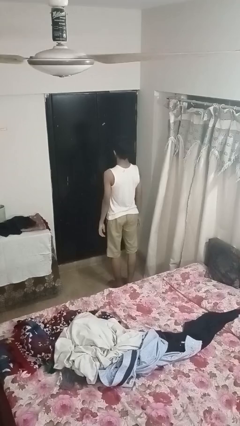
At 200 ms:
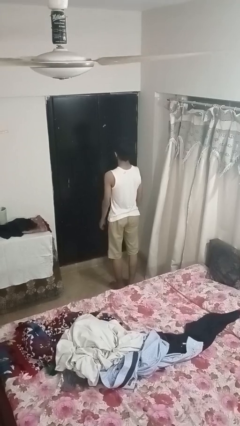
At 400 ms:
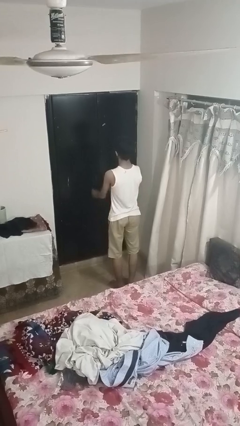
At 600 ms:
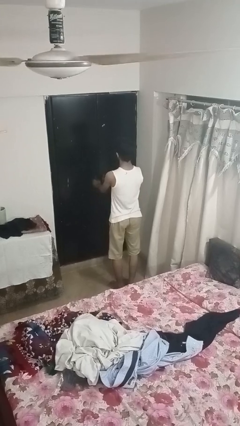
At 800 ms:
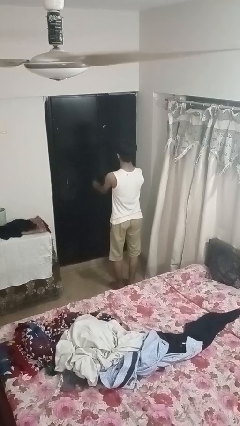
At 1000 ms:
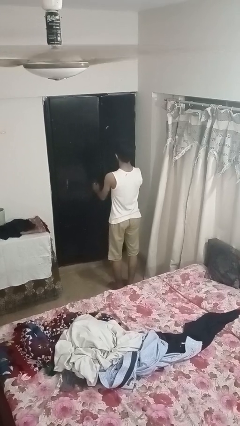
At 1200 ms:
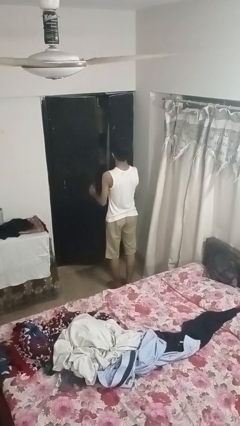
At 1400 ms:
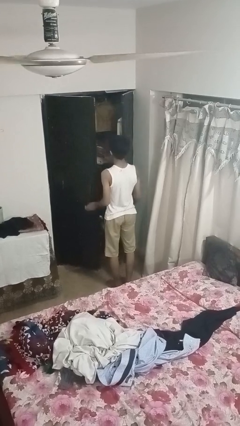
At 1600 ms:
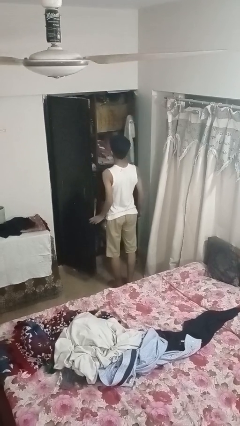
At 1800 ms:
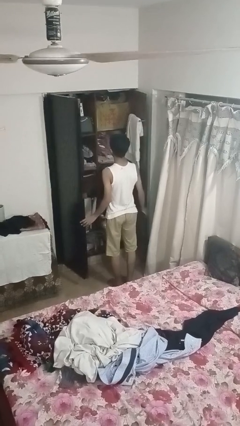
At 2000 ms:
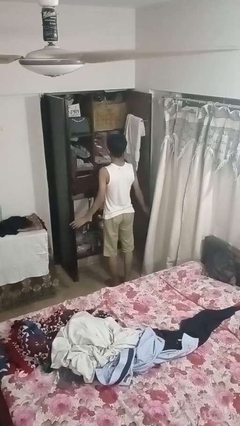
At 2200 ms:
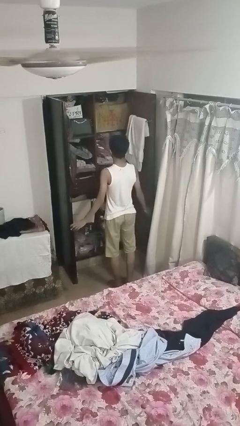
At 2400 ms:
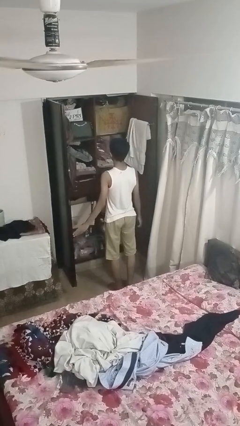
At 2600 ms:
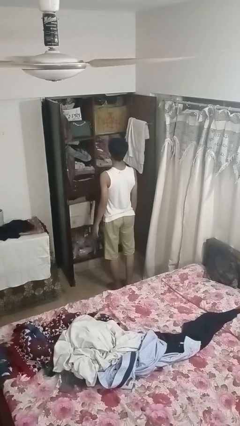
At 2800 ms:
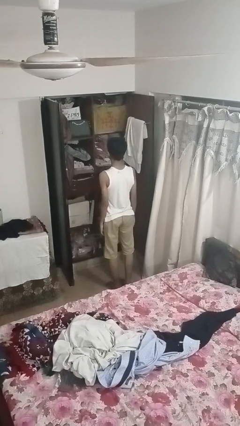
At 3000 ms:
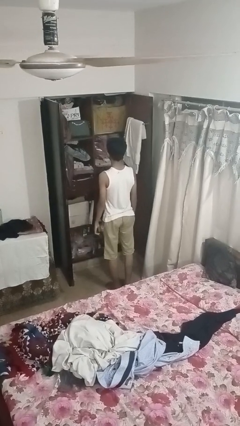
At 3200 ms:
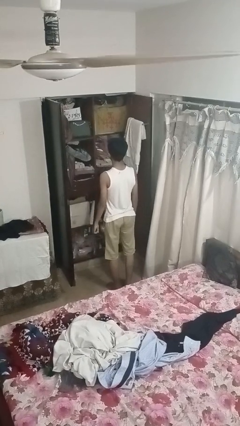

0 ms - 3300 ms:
person opens closet door

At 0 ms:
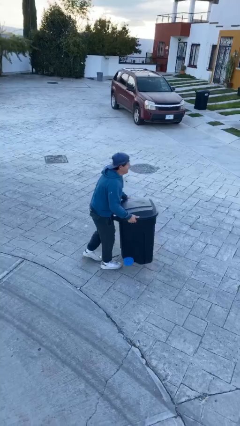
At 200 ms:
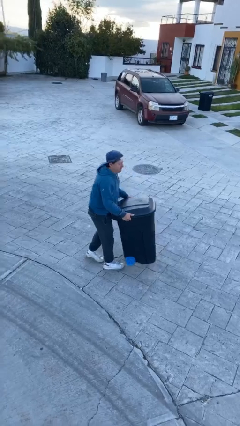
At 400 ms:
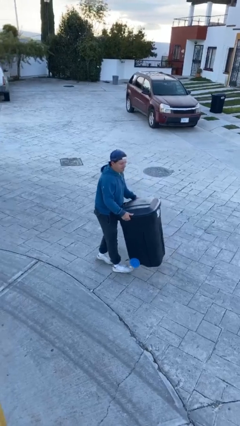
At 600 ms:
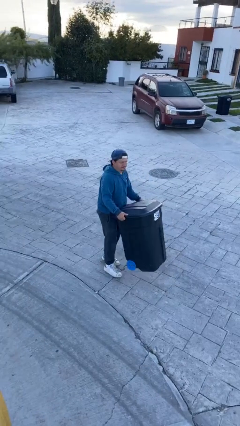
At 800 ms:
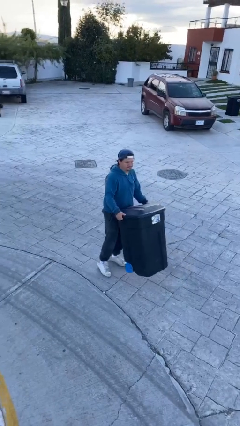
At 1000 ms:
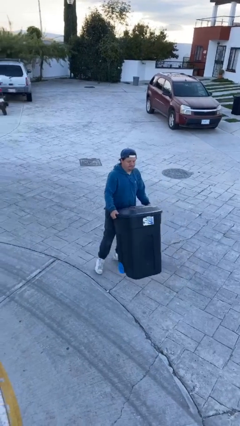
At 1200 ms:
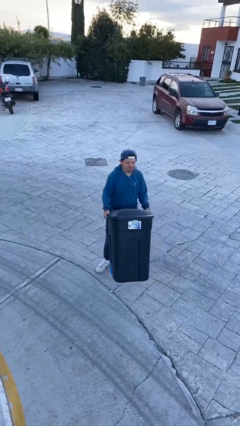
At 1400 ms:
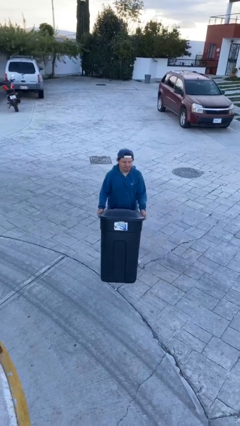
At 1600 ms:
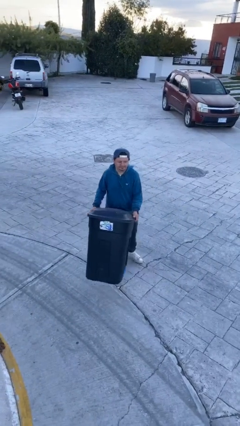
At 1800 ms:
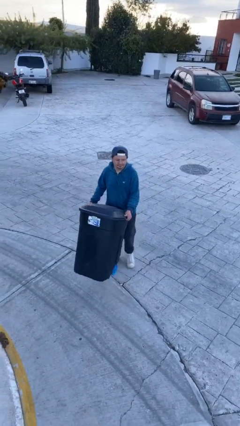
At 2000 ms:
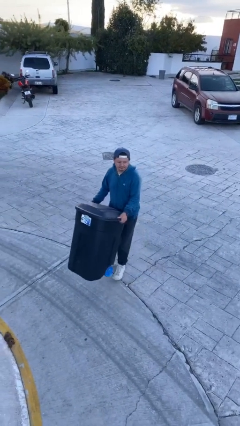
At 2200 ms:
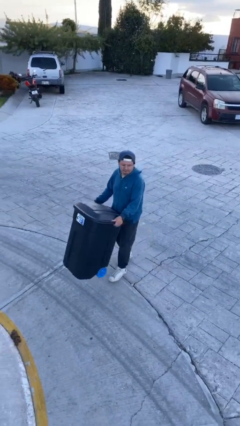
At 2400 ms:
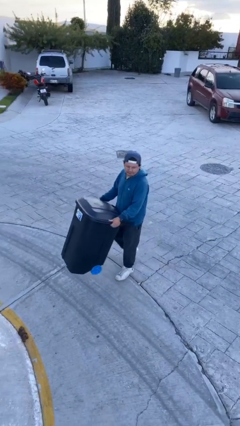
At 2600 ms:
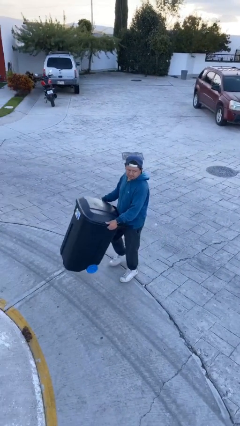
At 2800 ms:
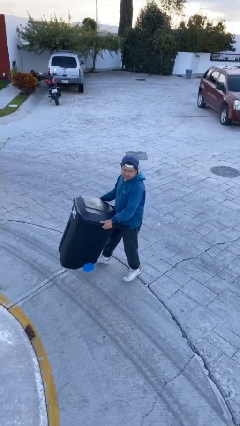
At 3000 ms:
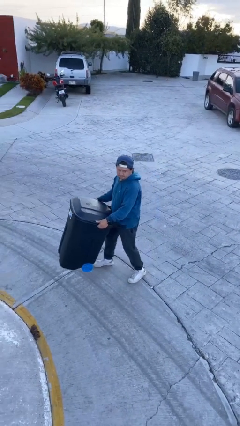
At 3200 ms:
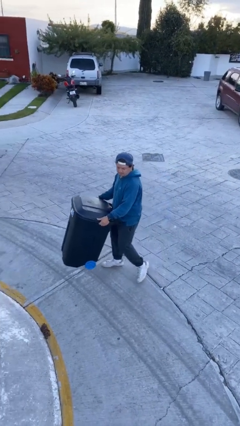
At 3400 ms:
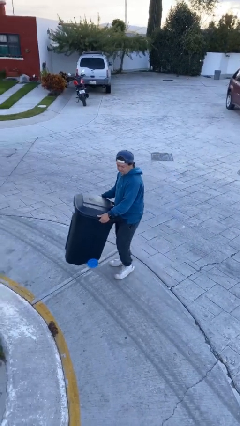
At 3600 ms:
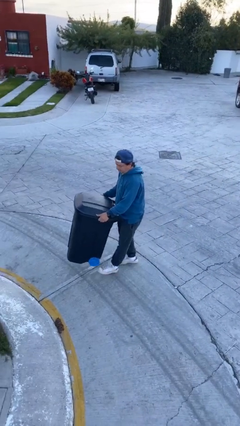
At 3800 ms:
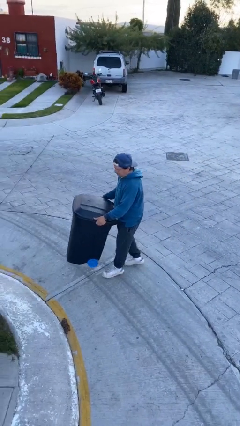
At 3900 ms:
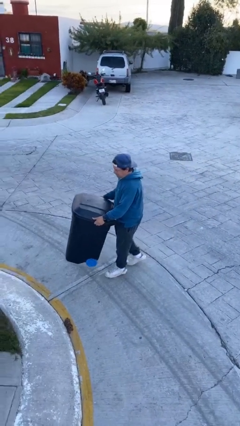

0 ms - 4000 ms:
person carries heavy object

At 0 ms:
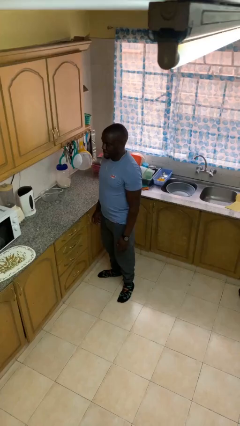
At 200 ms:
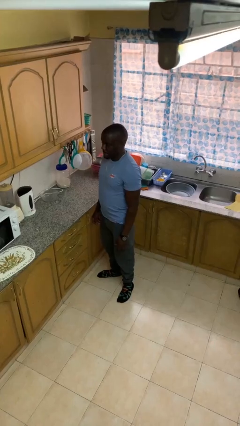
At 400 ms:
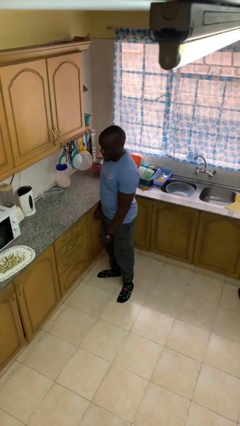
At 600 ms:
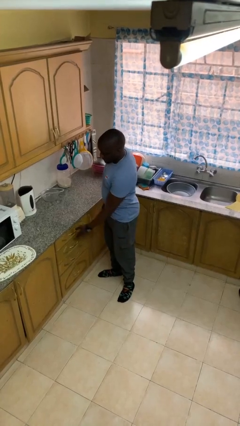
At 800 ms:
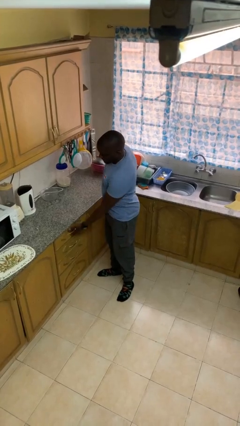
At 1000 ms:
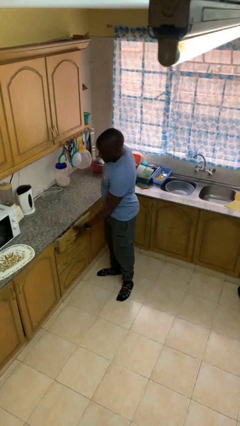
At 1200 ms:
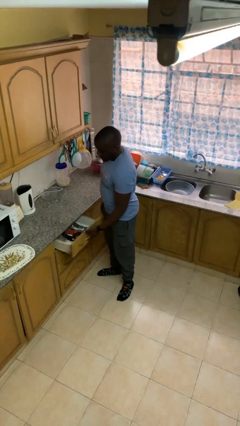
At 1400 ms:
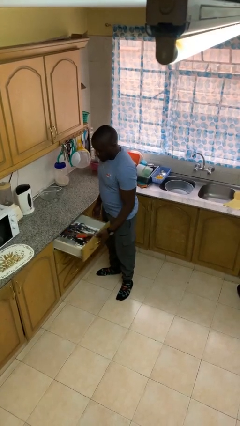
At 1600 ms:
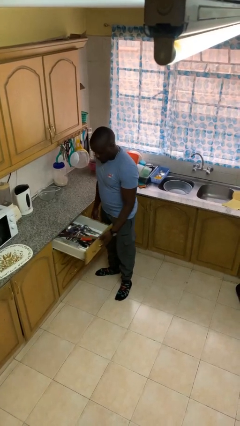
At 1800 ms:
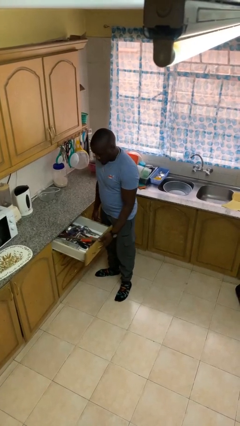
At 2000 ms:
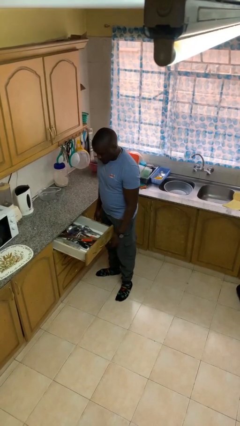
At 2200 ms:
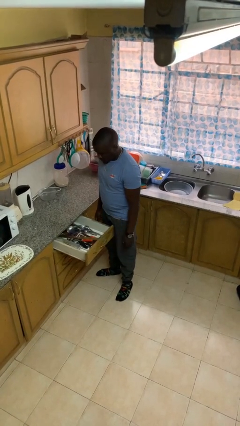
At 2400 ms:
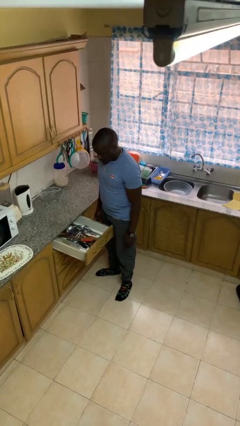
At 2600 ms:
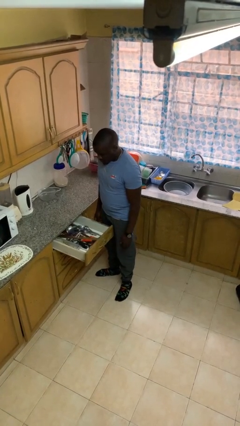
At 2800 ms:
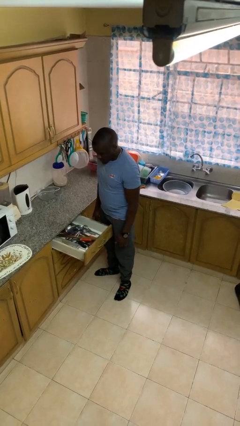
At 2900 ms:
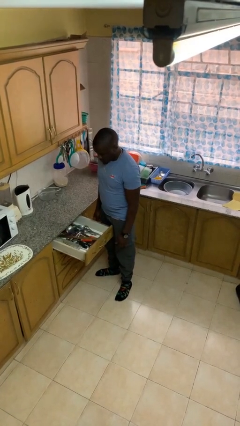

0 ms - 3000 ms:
person opens kitchen drawer

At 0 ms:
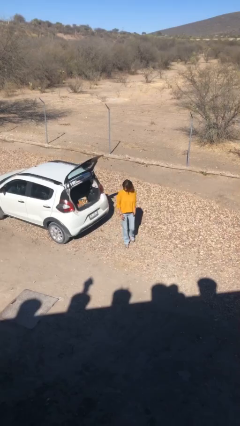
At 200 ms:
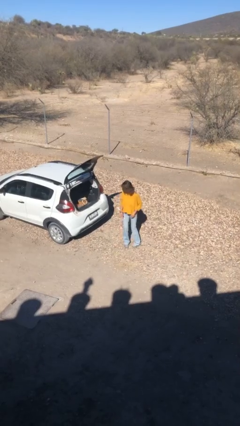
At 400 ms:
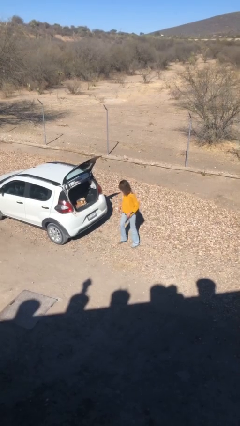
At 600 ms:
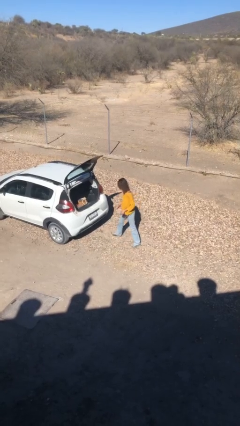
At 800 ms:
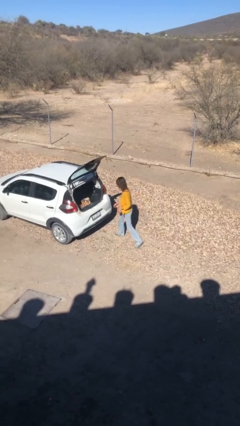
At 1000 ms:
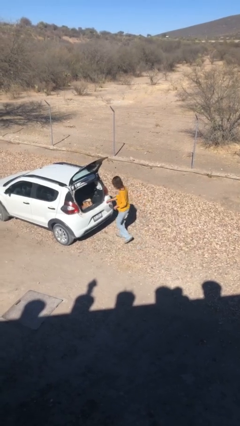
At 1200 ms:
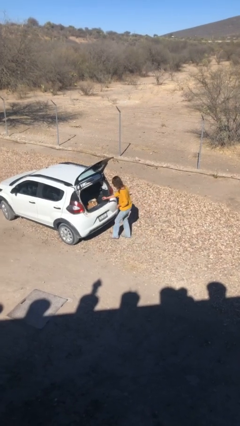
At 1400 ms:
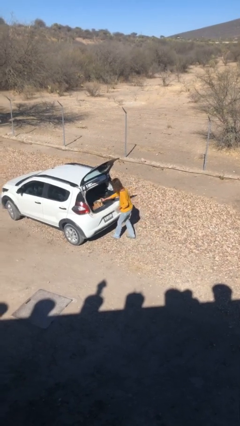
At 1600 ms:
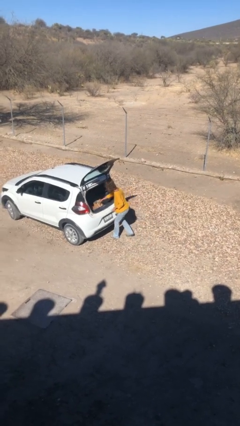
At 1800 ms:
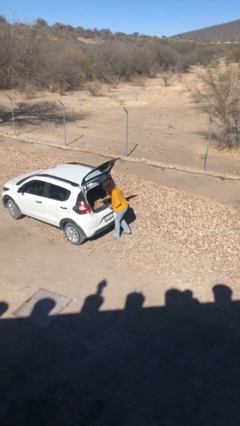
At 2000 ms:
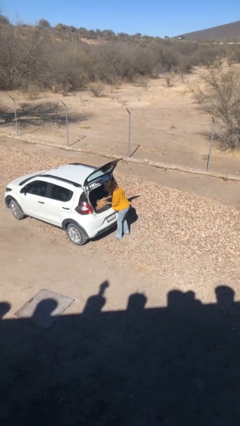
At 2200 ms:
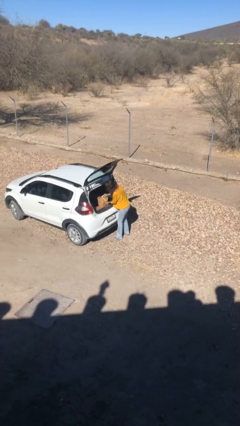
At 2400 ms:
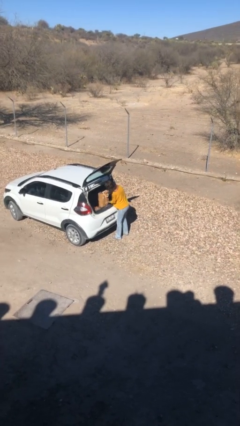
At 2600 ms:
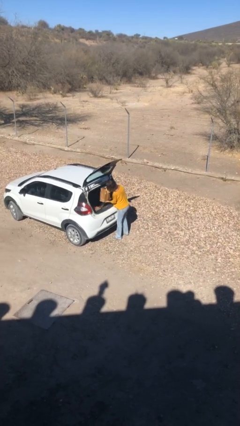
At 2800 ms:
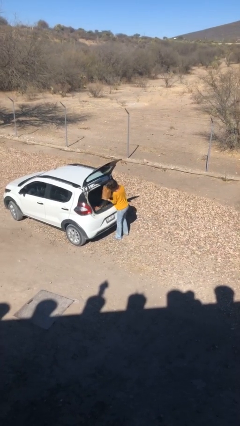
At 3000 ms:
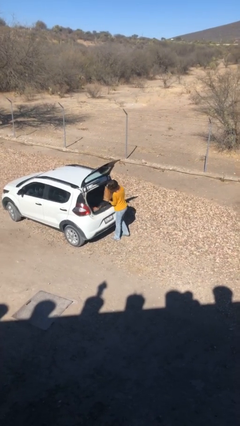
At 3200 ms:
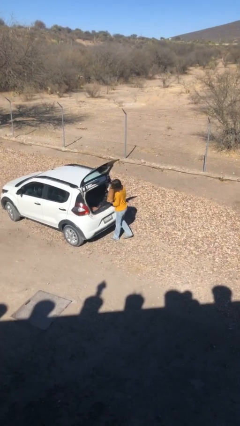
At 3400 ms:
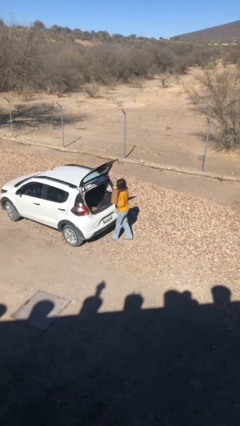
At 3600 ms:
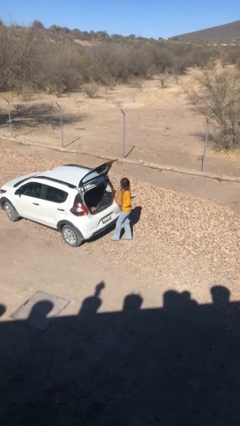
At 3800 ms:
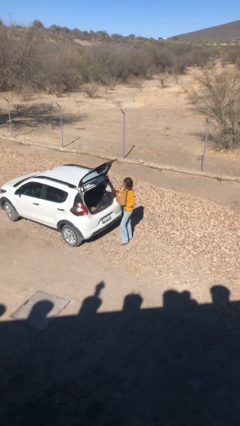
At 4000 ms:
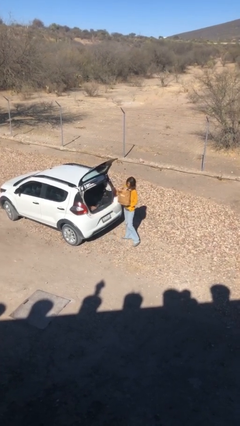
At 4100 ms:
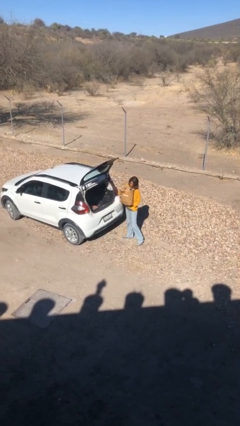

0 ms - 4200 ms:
person unloads car

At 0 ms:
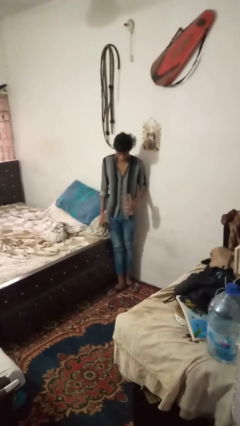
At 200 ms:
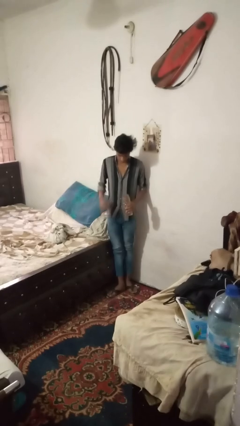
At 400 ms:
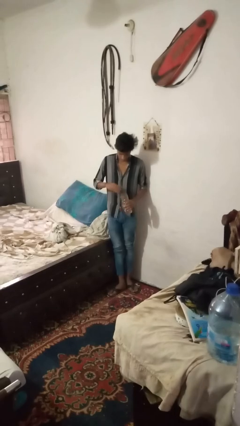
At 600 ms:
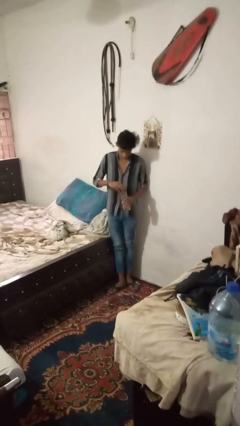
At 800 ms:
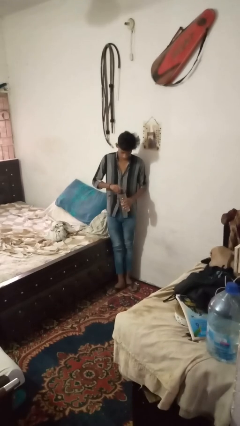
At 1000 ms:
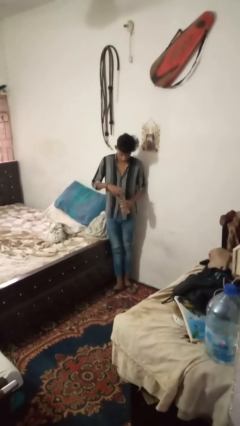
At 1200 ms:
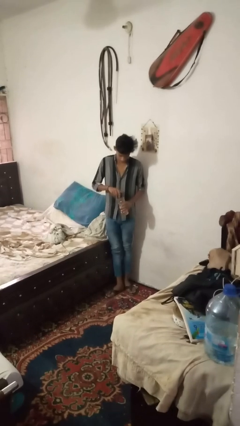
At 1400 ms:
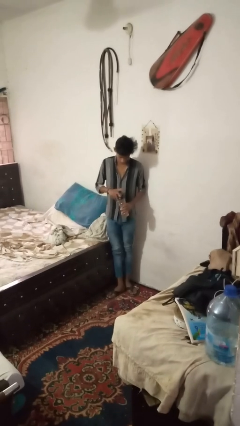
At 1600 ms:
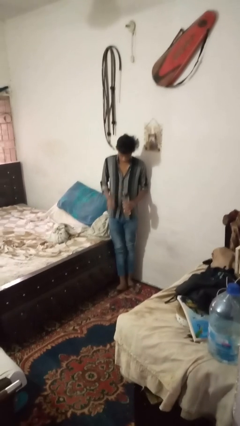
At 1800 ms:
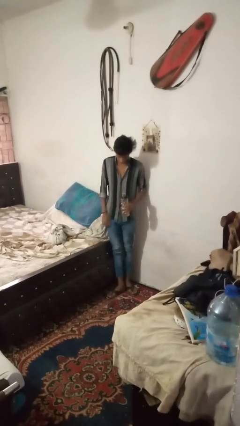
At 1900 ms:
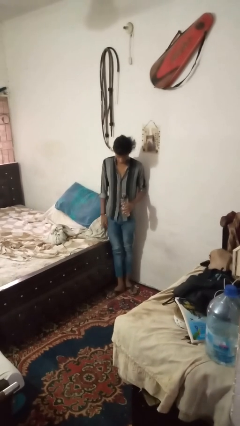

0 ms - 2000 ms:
person screws lid to bottle

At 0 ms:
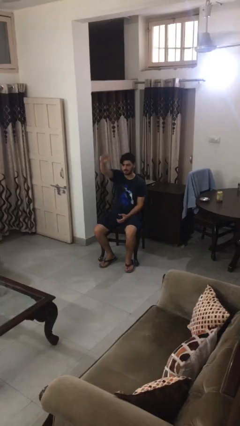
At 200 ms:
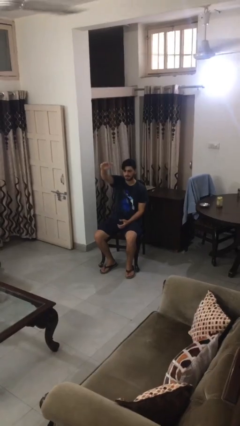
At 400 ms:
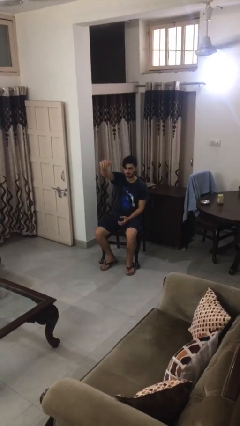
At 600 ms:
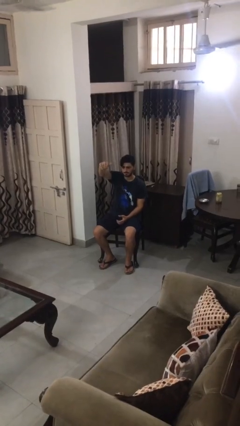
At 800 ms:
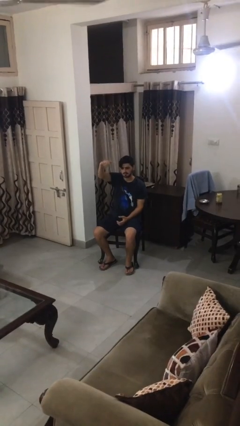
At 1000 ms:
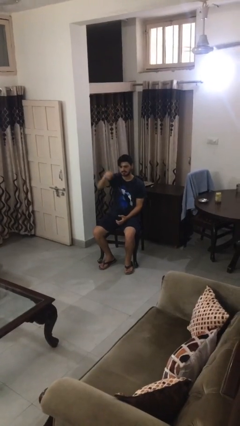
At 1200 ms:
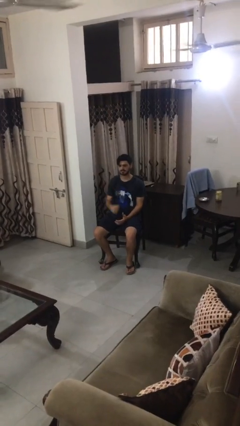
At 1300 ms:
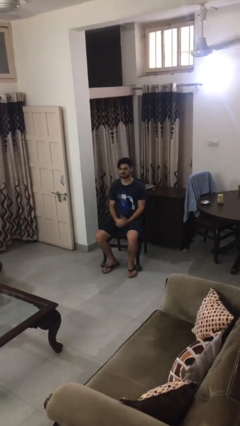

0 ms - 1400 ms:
person gestures come here
